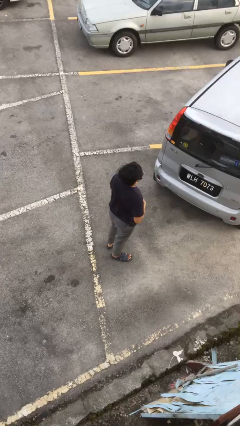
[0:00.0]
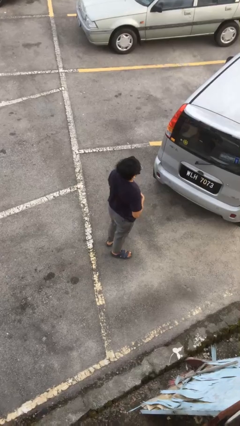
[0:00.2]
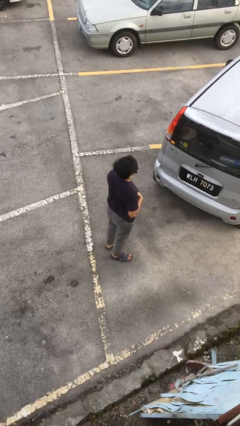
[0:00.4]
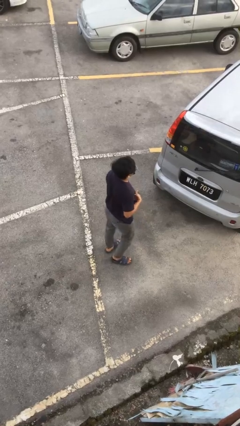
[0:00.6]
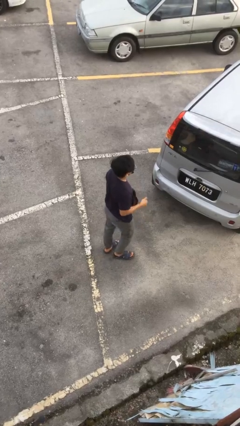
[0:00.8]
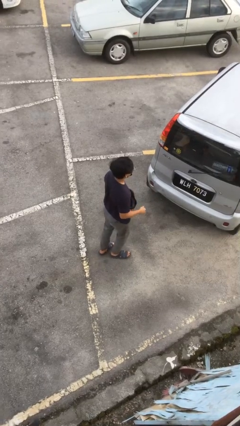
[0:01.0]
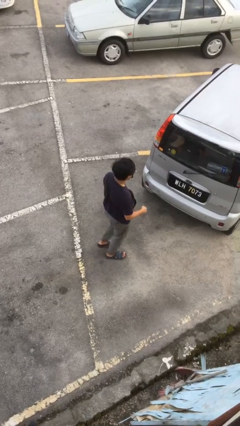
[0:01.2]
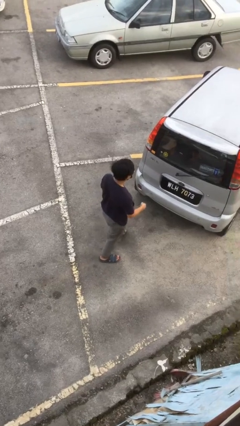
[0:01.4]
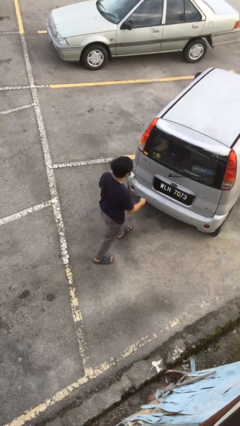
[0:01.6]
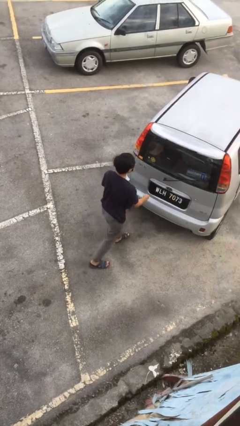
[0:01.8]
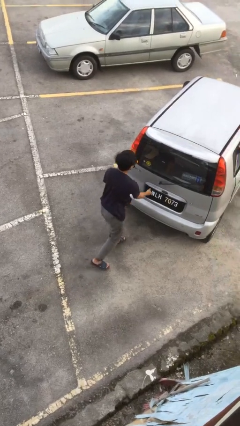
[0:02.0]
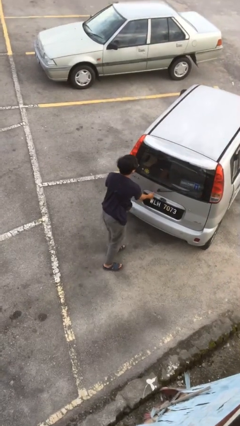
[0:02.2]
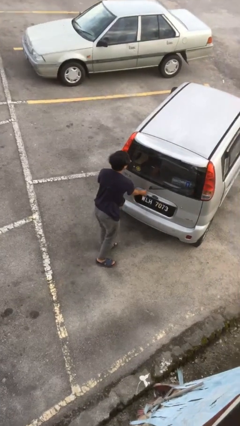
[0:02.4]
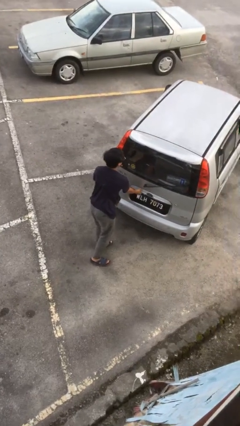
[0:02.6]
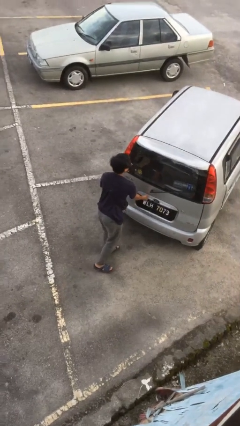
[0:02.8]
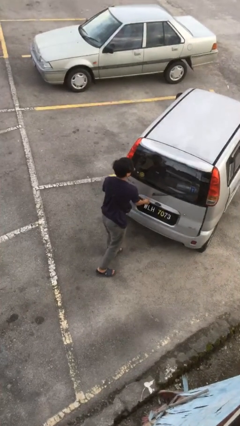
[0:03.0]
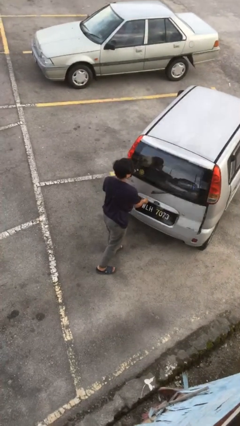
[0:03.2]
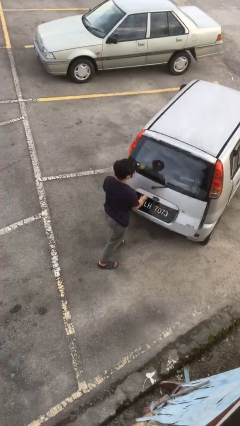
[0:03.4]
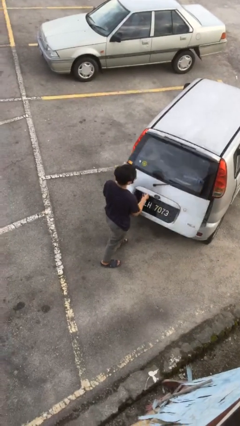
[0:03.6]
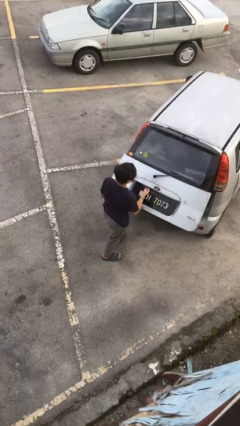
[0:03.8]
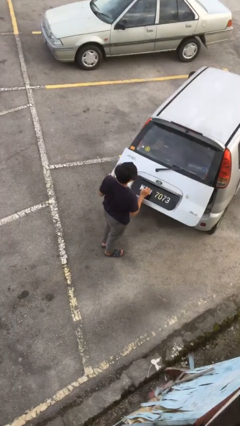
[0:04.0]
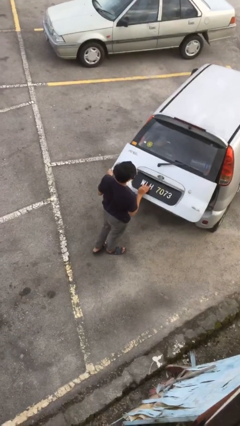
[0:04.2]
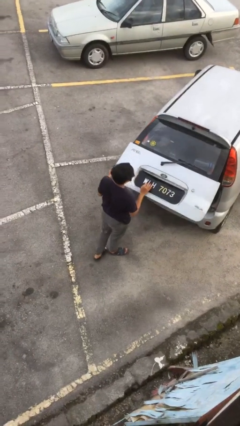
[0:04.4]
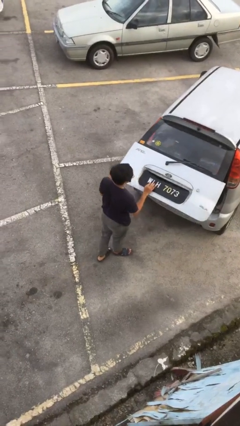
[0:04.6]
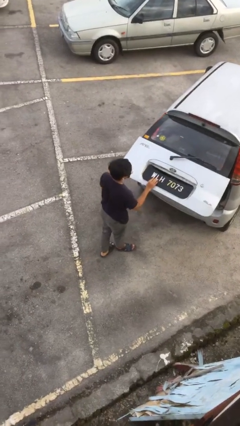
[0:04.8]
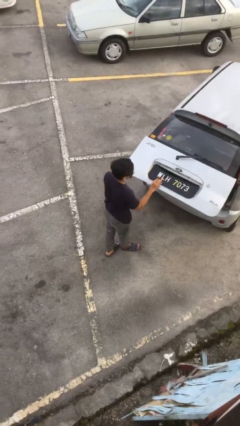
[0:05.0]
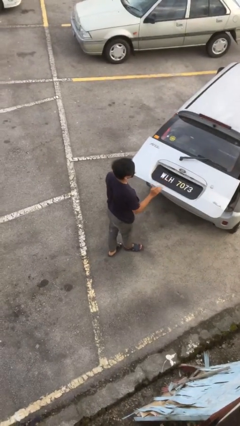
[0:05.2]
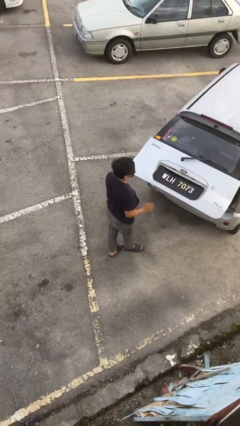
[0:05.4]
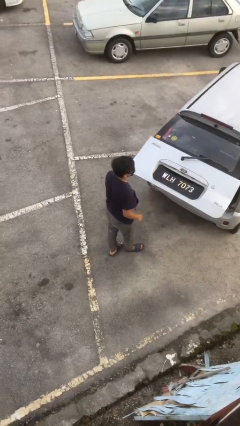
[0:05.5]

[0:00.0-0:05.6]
person opens car trunk

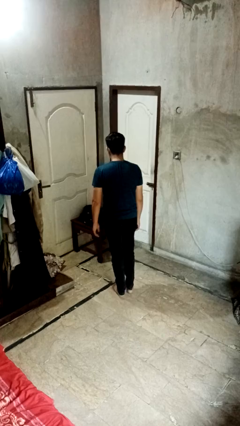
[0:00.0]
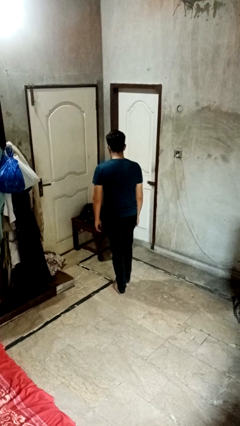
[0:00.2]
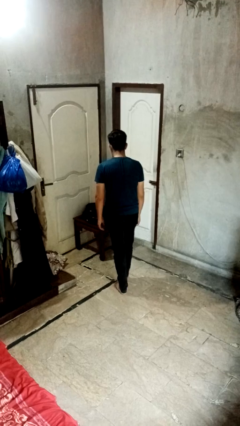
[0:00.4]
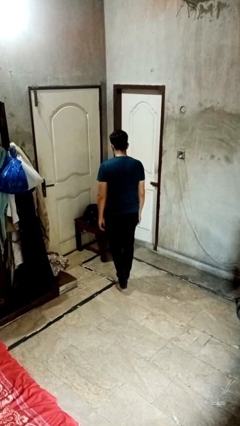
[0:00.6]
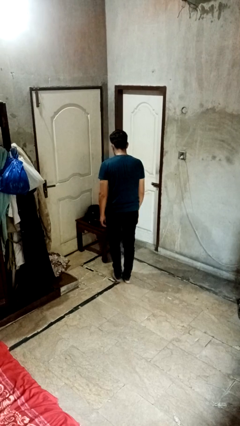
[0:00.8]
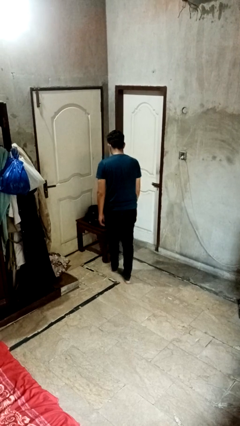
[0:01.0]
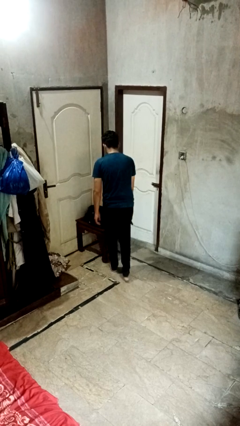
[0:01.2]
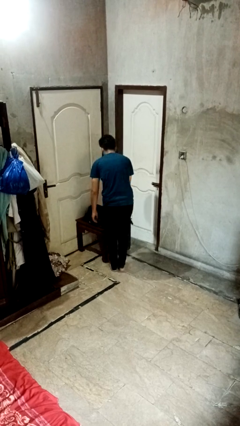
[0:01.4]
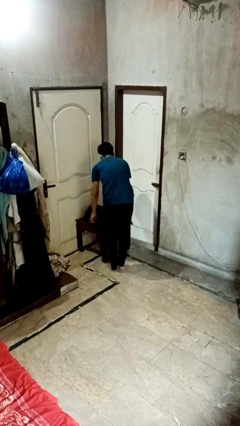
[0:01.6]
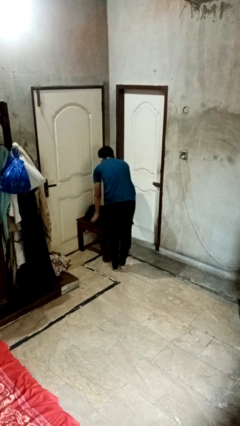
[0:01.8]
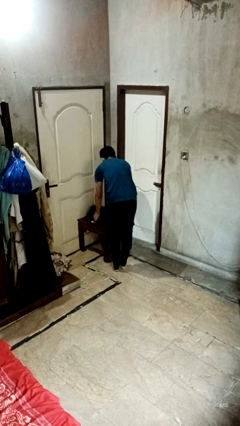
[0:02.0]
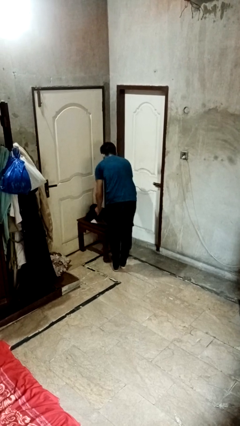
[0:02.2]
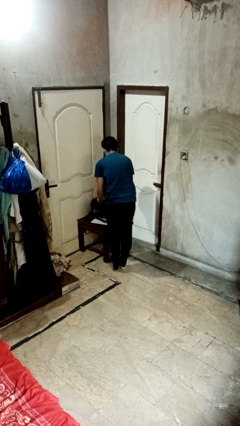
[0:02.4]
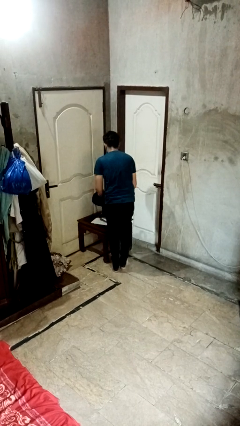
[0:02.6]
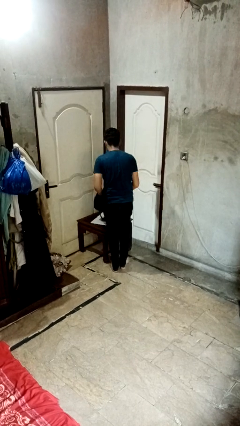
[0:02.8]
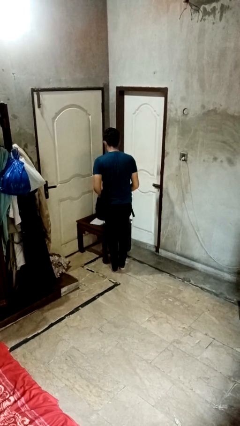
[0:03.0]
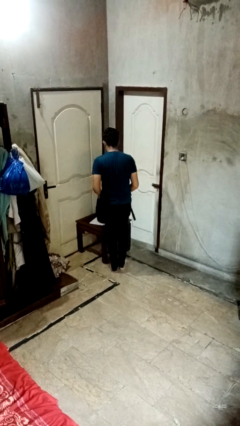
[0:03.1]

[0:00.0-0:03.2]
person picks up object from table

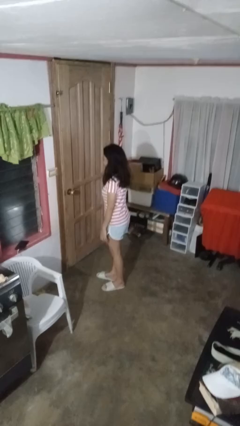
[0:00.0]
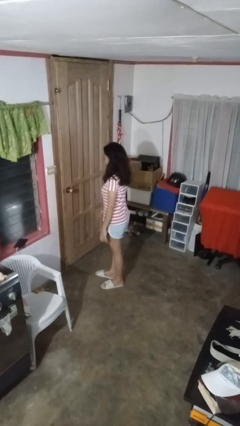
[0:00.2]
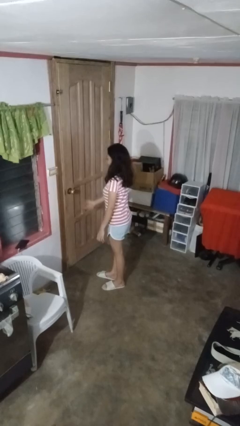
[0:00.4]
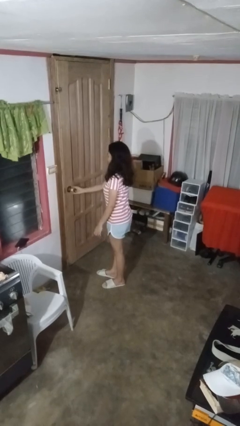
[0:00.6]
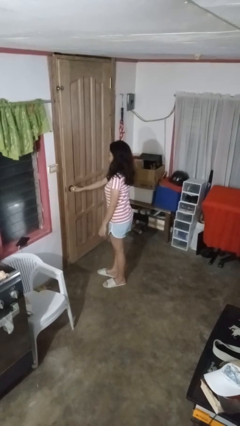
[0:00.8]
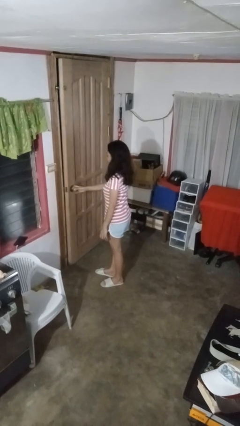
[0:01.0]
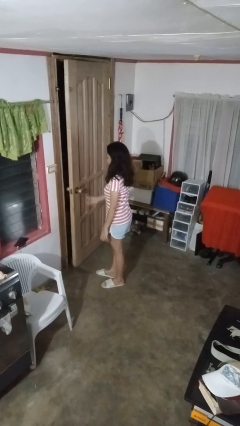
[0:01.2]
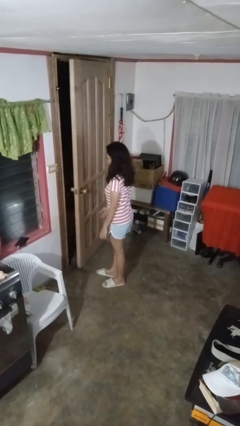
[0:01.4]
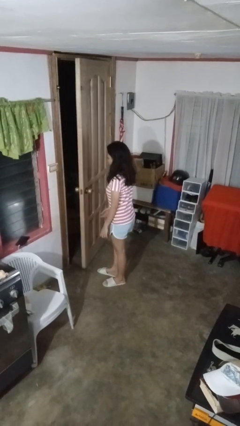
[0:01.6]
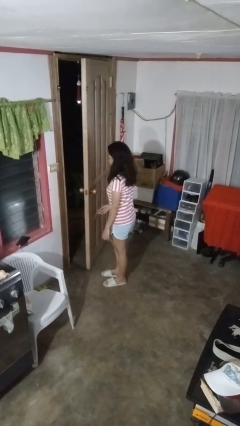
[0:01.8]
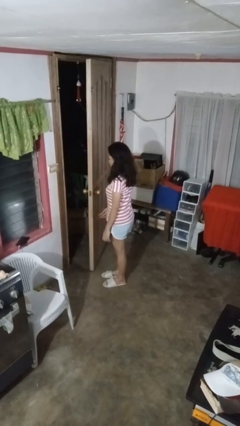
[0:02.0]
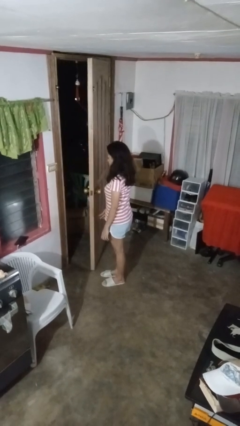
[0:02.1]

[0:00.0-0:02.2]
person opens facility door

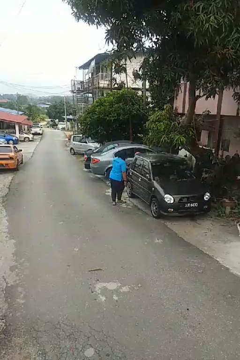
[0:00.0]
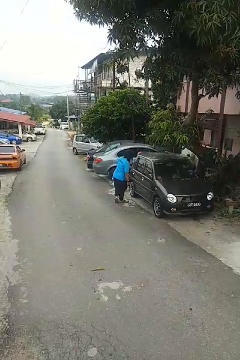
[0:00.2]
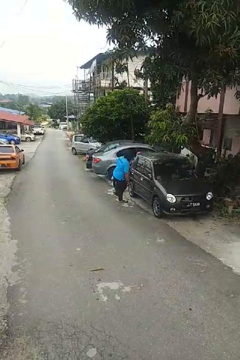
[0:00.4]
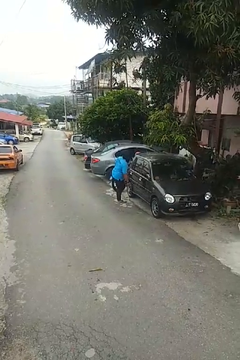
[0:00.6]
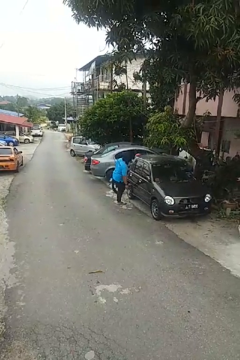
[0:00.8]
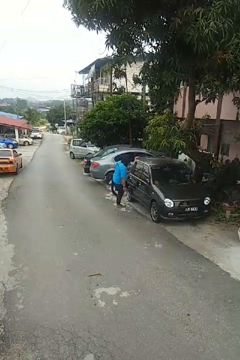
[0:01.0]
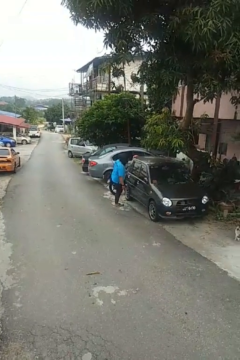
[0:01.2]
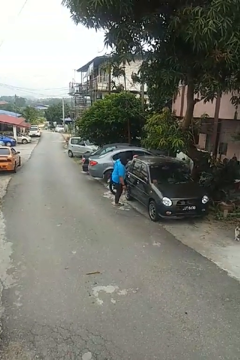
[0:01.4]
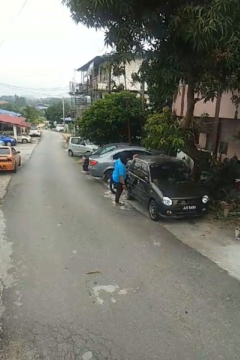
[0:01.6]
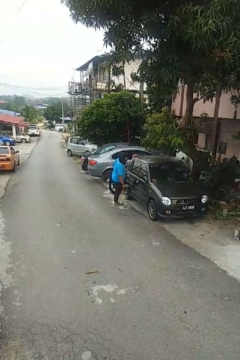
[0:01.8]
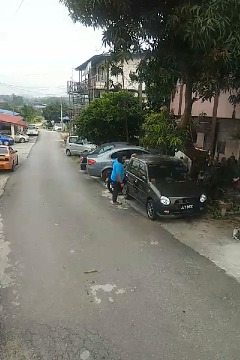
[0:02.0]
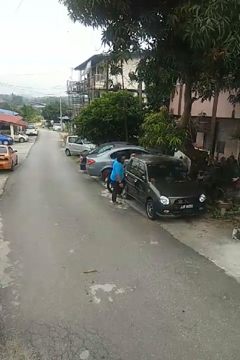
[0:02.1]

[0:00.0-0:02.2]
person kicks car tires

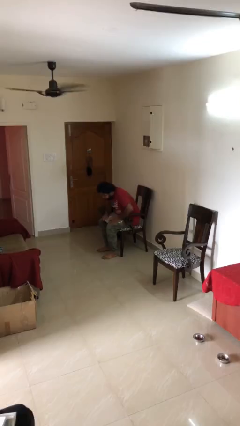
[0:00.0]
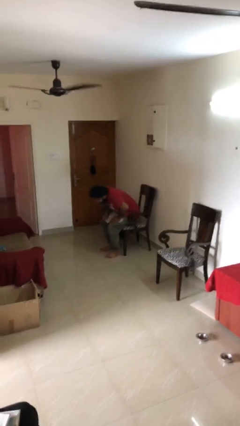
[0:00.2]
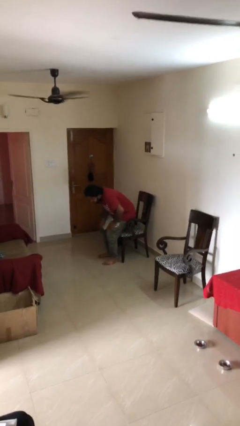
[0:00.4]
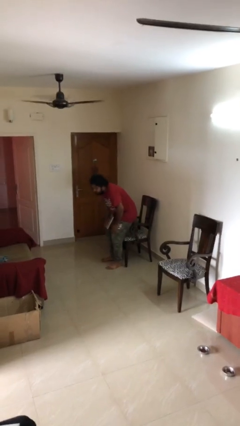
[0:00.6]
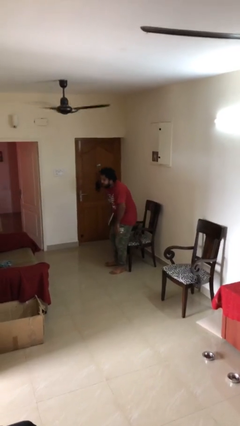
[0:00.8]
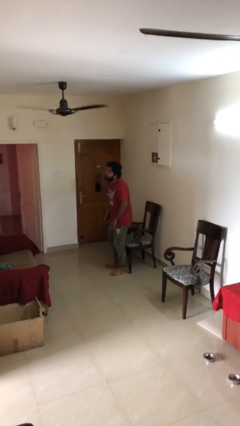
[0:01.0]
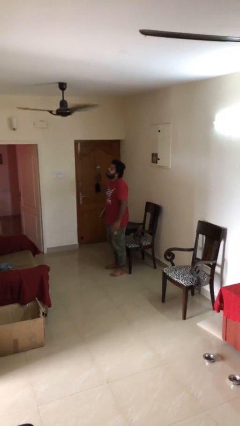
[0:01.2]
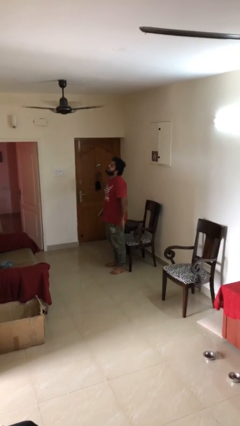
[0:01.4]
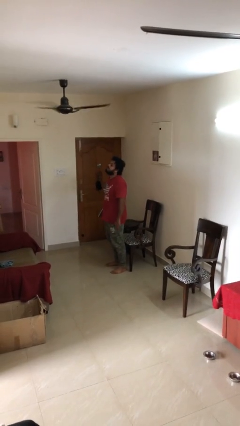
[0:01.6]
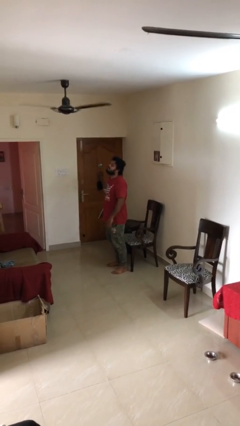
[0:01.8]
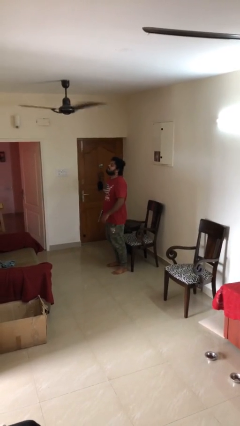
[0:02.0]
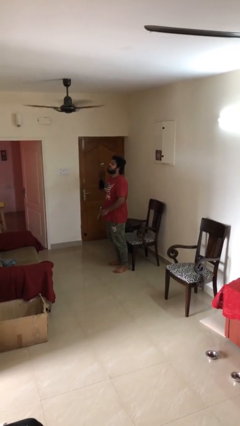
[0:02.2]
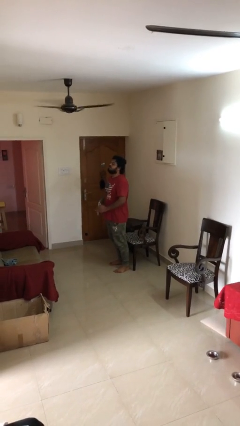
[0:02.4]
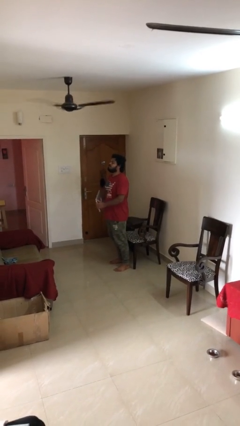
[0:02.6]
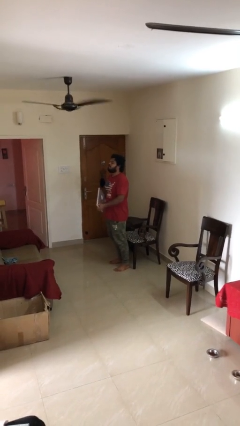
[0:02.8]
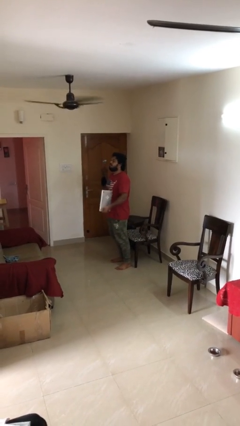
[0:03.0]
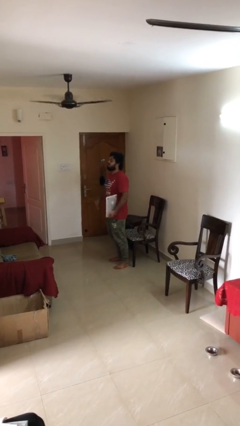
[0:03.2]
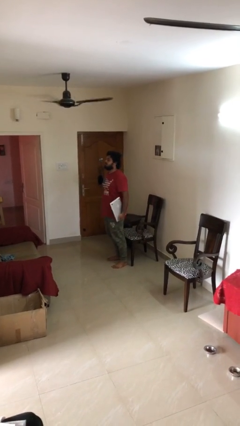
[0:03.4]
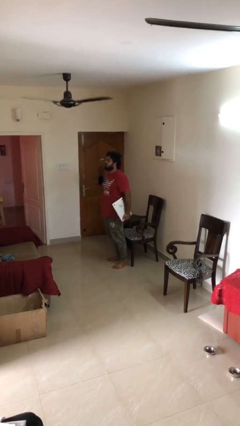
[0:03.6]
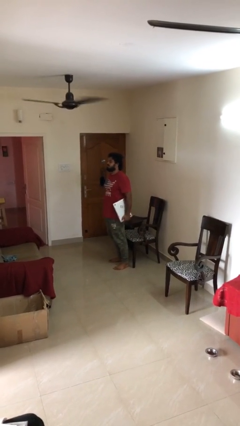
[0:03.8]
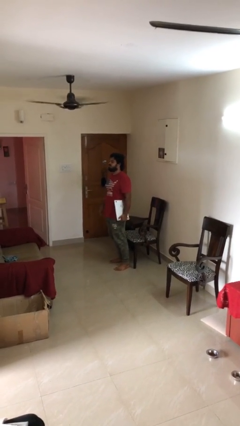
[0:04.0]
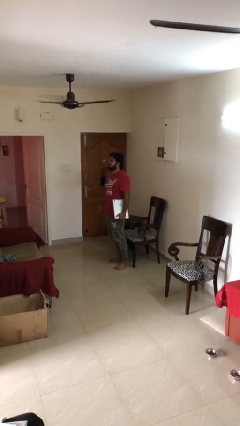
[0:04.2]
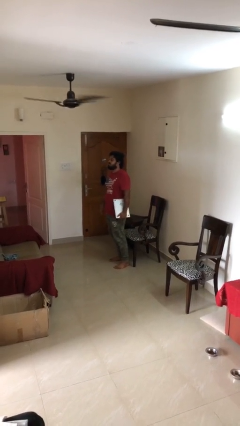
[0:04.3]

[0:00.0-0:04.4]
person stands up
